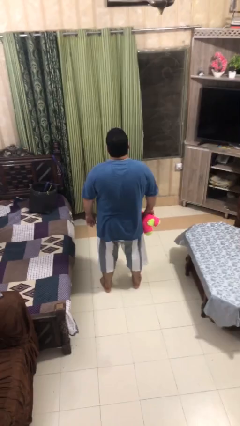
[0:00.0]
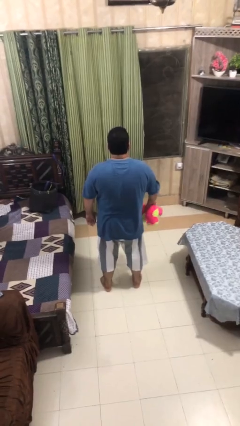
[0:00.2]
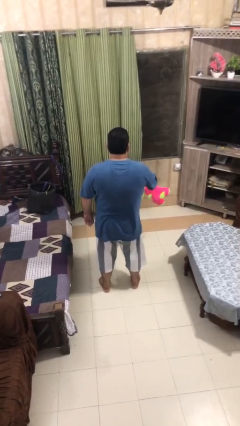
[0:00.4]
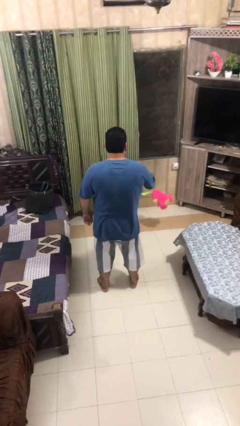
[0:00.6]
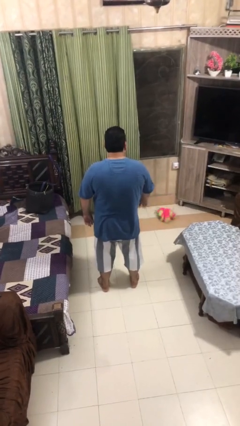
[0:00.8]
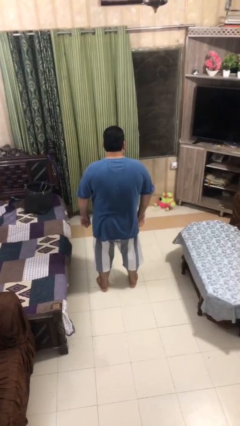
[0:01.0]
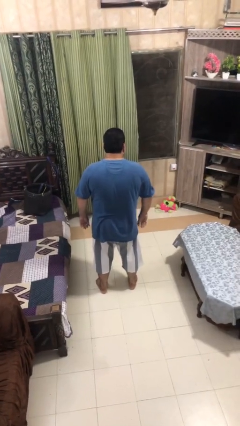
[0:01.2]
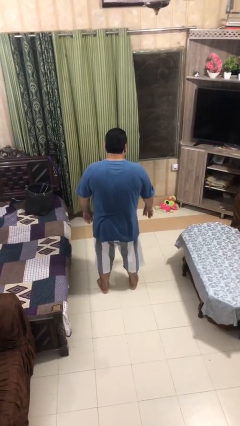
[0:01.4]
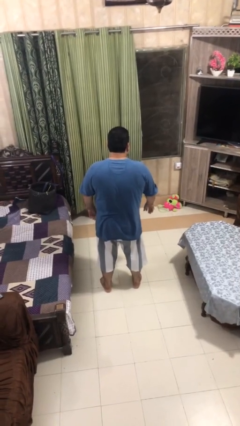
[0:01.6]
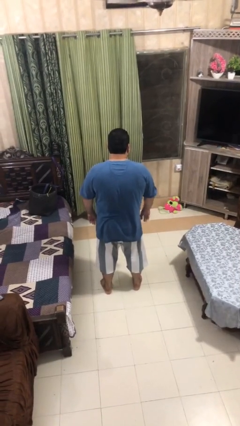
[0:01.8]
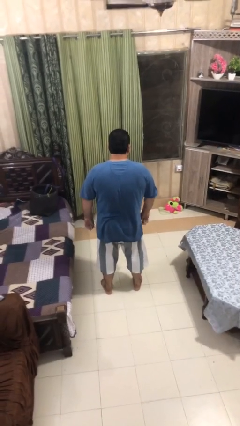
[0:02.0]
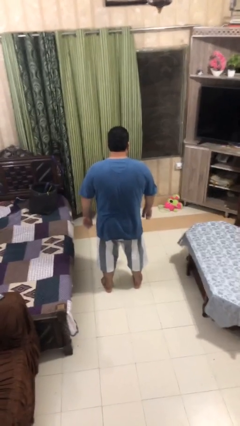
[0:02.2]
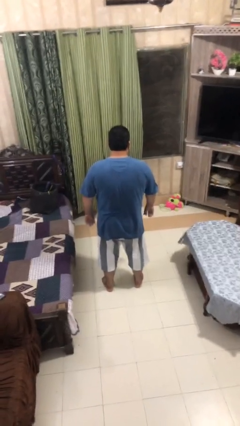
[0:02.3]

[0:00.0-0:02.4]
person throws object to ground

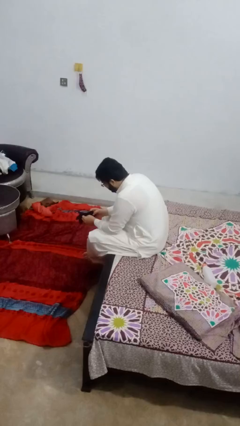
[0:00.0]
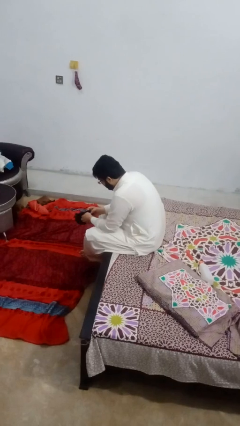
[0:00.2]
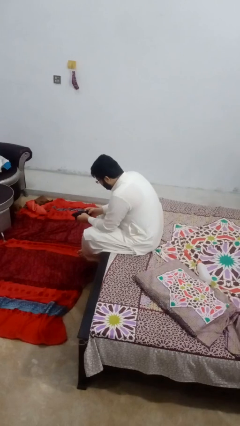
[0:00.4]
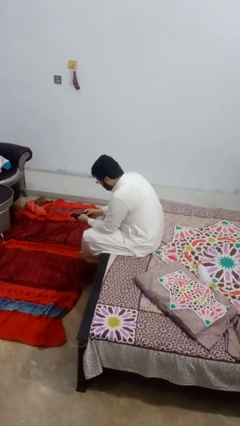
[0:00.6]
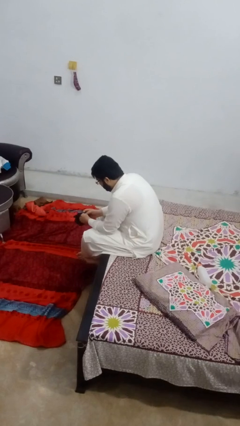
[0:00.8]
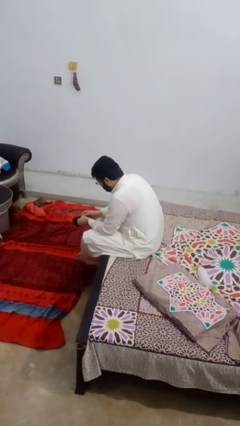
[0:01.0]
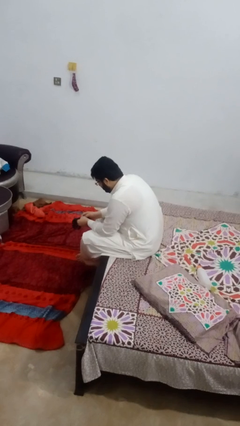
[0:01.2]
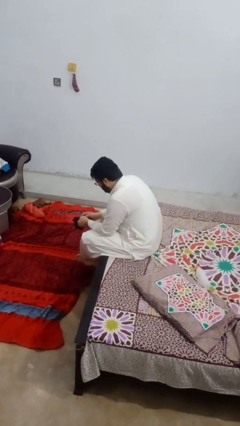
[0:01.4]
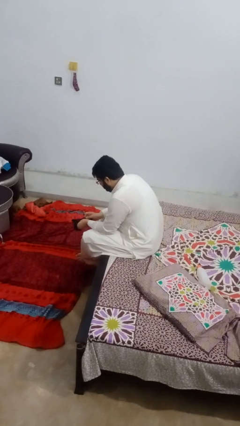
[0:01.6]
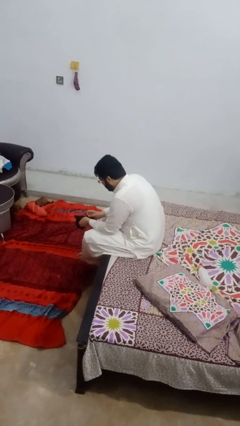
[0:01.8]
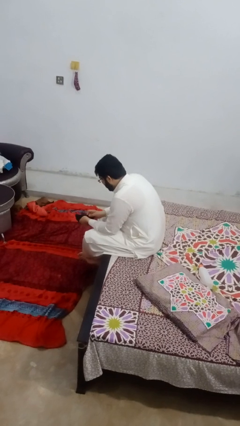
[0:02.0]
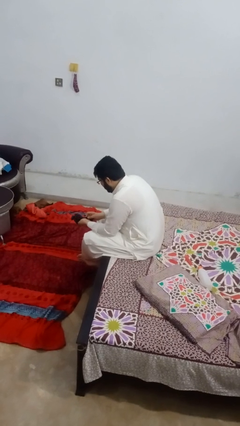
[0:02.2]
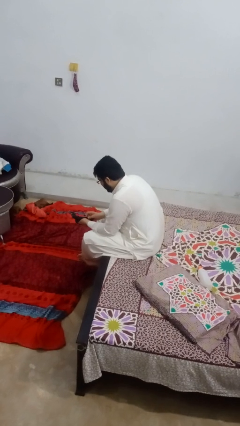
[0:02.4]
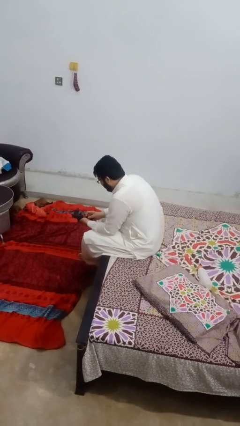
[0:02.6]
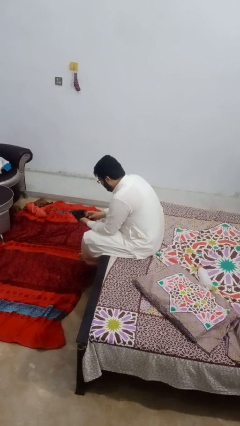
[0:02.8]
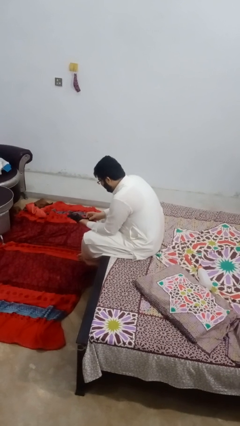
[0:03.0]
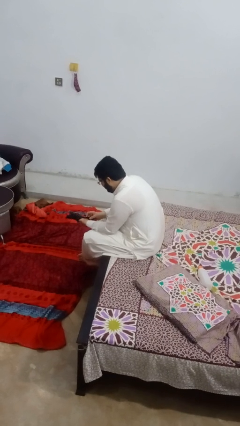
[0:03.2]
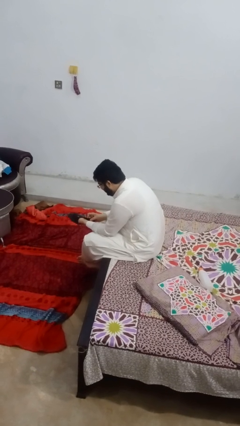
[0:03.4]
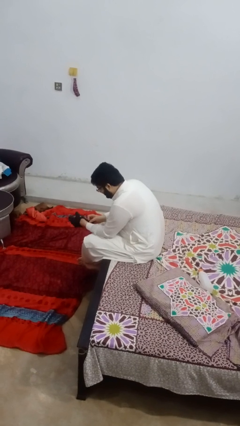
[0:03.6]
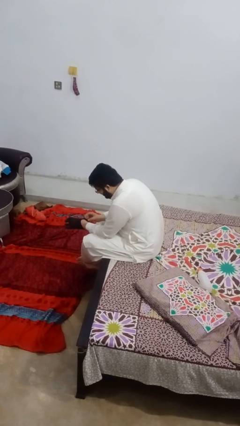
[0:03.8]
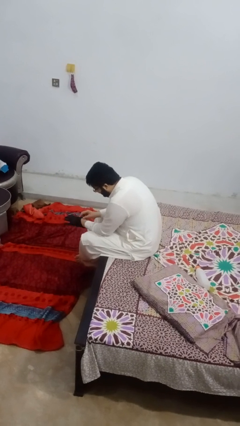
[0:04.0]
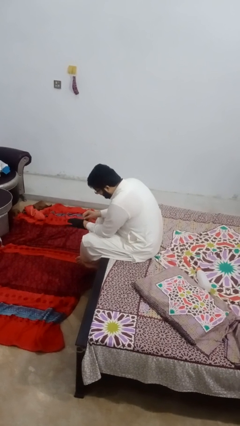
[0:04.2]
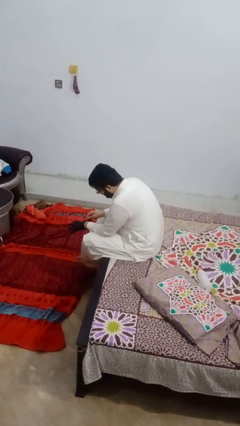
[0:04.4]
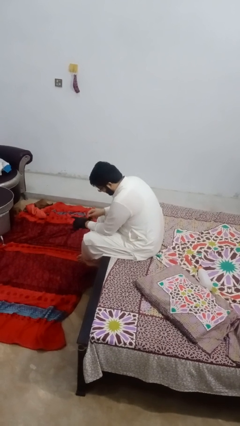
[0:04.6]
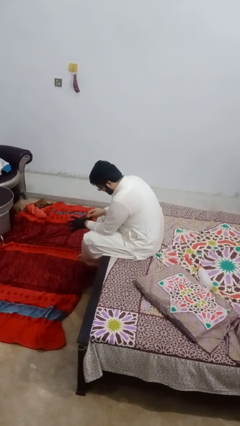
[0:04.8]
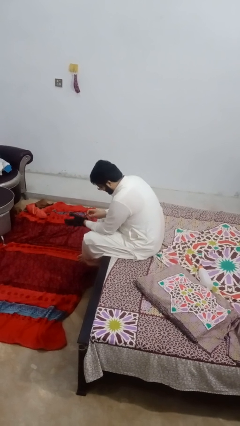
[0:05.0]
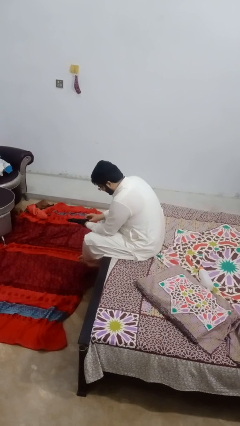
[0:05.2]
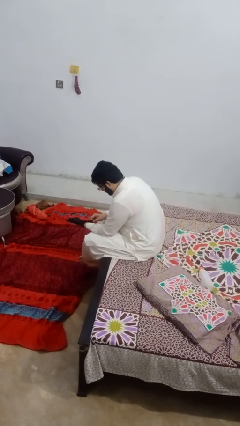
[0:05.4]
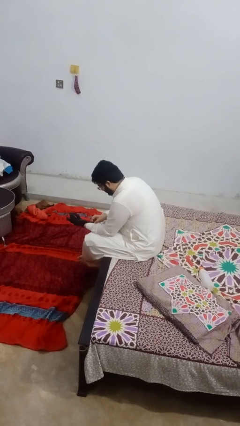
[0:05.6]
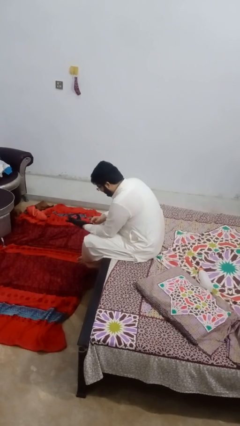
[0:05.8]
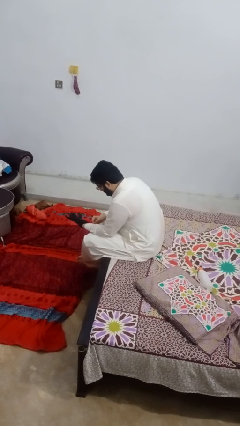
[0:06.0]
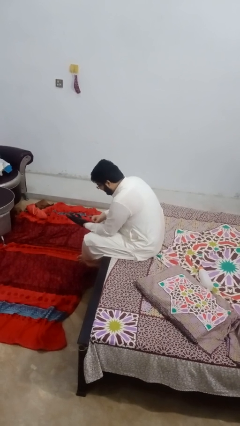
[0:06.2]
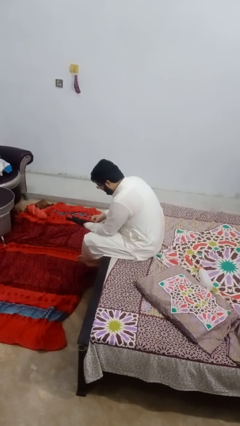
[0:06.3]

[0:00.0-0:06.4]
person puts on gloves

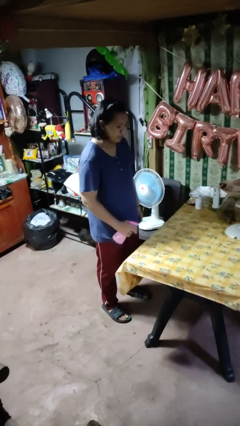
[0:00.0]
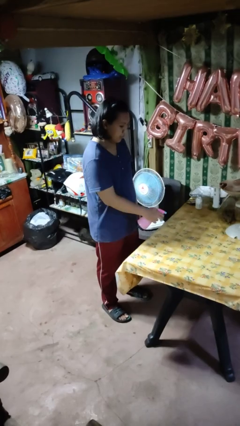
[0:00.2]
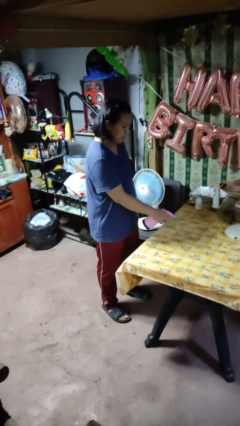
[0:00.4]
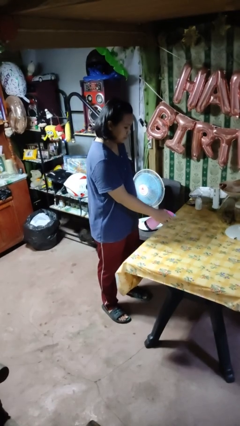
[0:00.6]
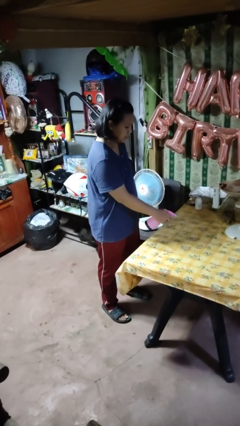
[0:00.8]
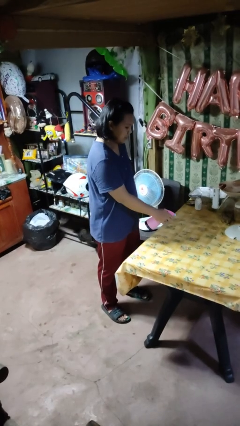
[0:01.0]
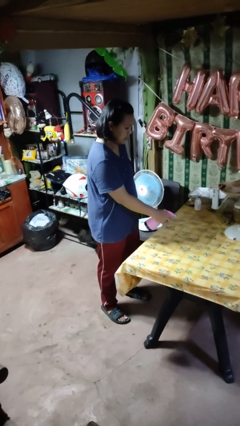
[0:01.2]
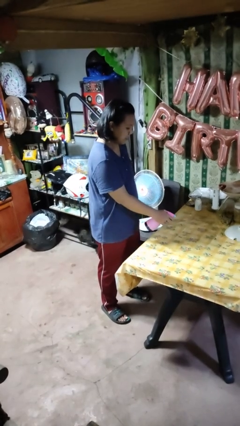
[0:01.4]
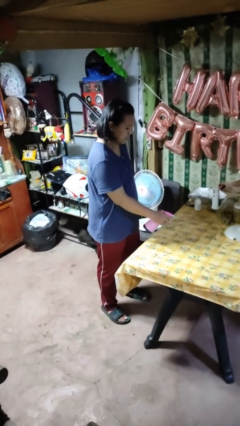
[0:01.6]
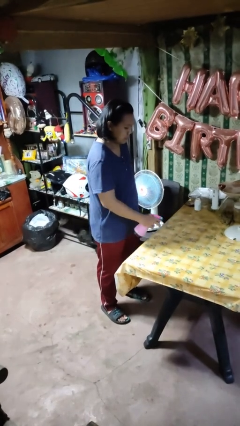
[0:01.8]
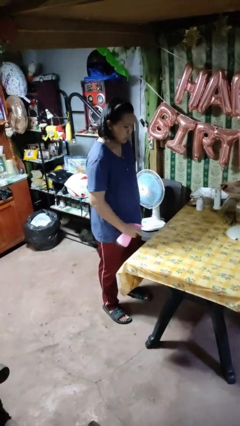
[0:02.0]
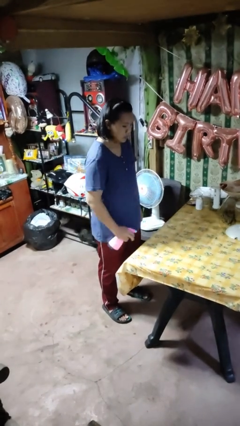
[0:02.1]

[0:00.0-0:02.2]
person sprays from bottle

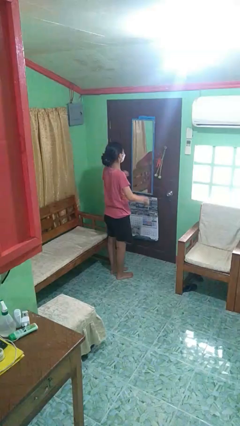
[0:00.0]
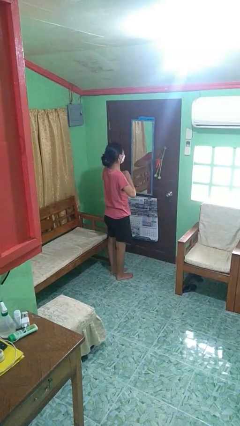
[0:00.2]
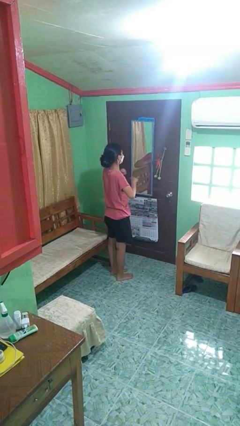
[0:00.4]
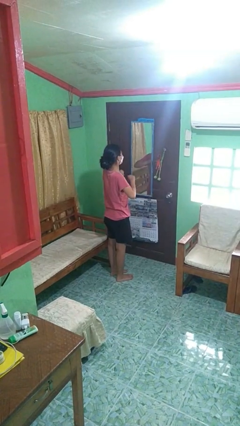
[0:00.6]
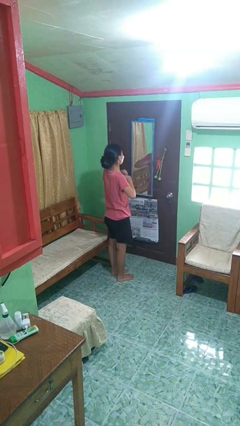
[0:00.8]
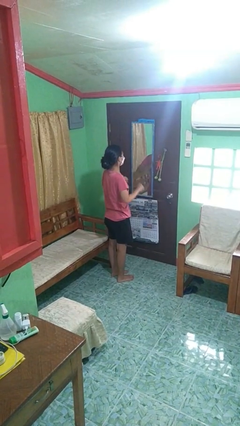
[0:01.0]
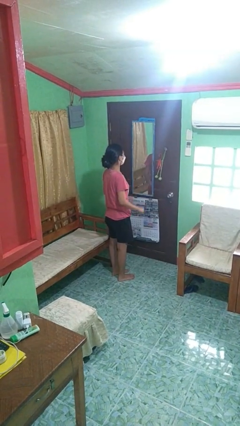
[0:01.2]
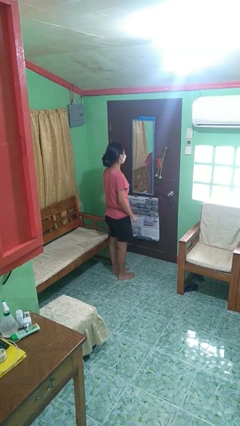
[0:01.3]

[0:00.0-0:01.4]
person drums on chest

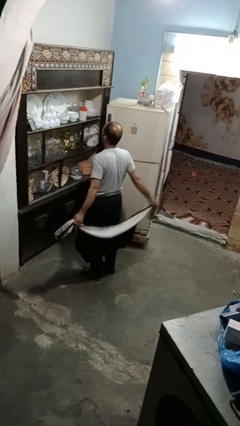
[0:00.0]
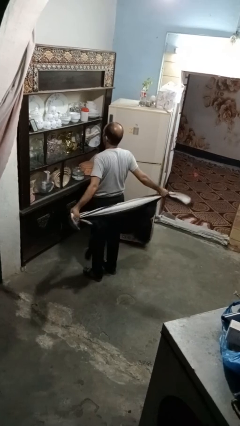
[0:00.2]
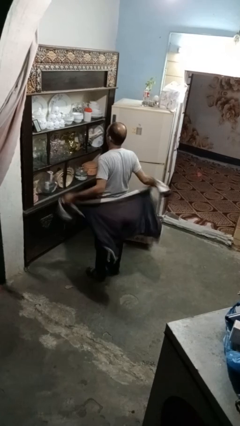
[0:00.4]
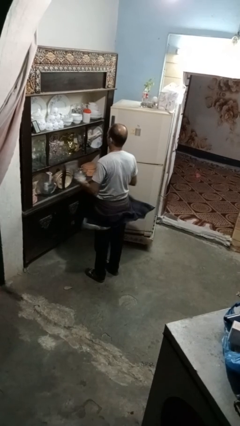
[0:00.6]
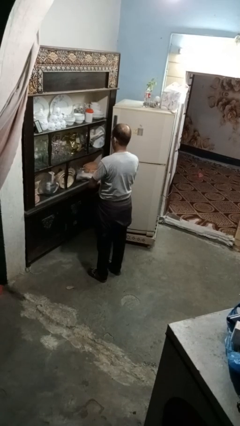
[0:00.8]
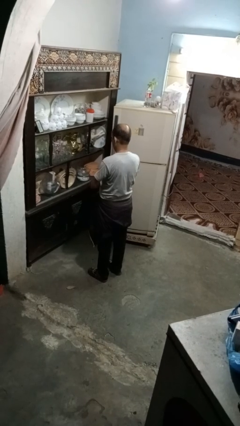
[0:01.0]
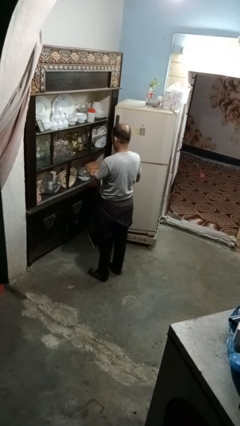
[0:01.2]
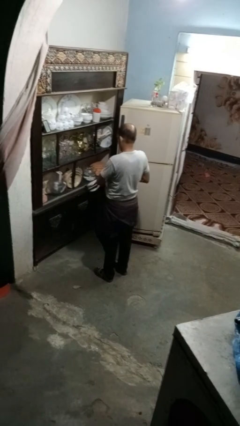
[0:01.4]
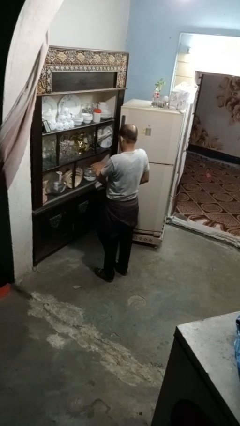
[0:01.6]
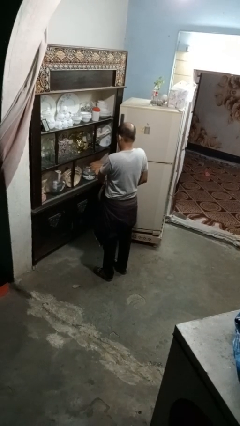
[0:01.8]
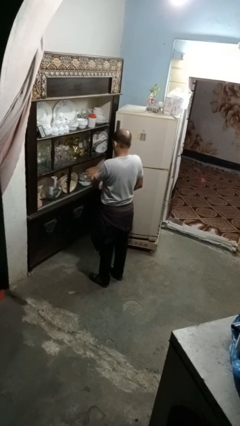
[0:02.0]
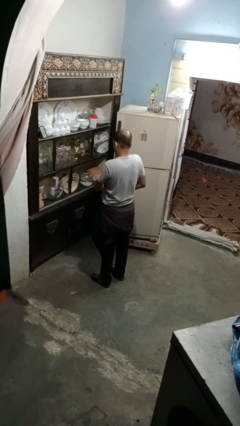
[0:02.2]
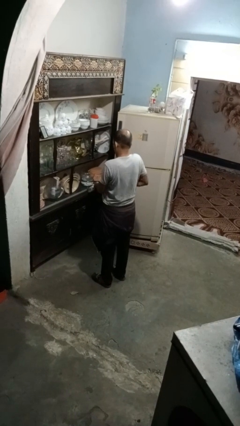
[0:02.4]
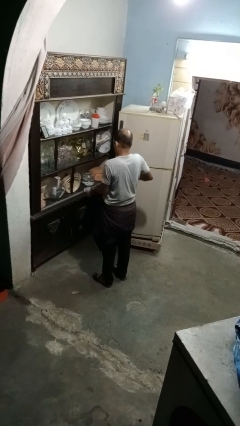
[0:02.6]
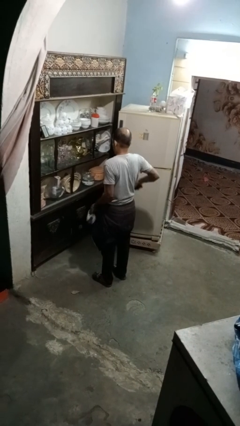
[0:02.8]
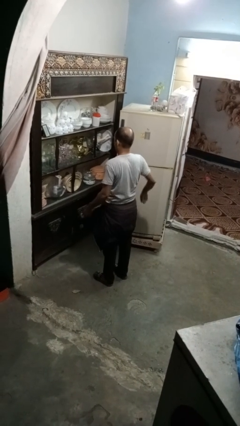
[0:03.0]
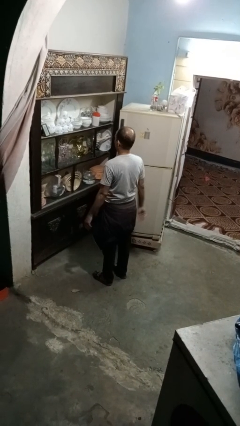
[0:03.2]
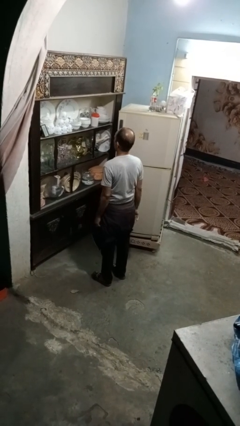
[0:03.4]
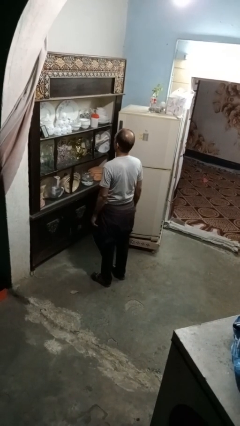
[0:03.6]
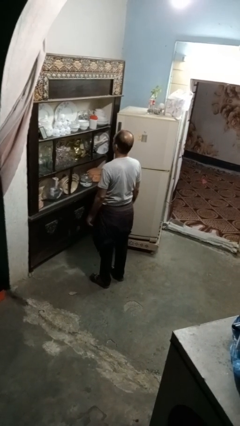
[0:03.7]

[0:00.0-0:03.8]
person ties jacket around waist

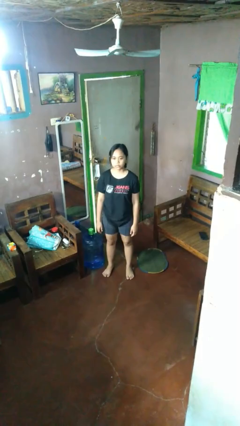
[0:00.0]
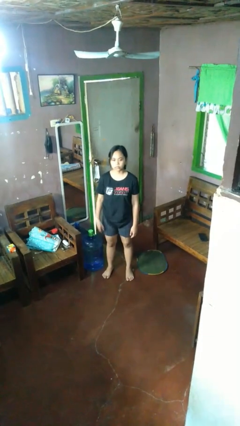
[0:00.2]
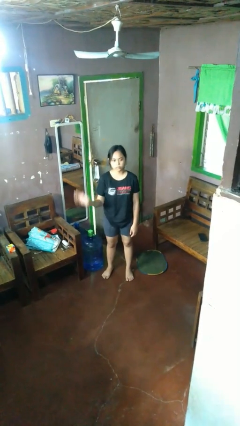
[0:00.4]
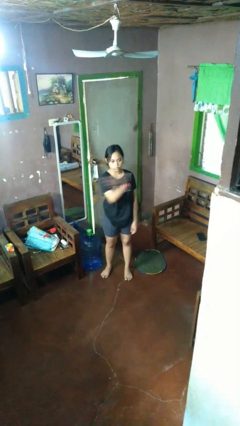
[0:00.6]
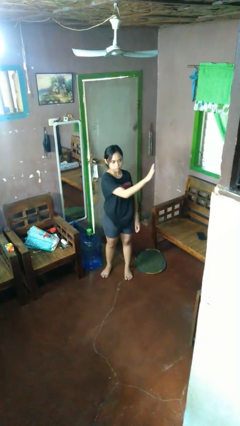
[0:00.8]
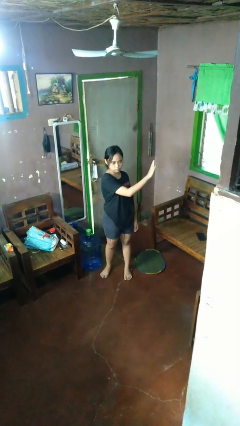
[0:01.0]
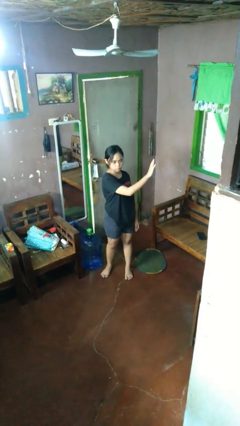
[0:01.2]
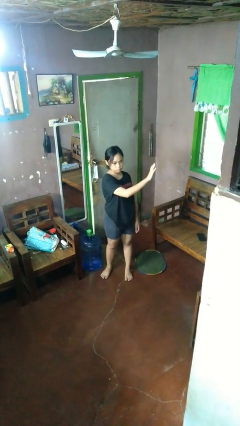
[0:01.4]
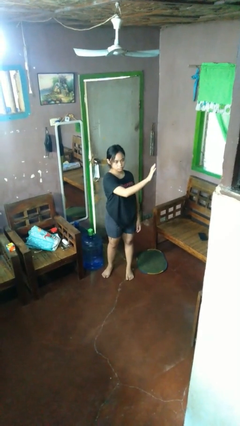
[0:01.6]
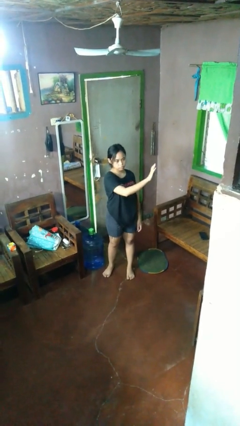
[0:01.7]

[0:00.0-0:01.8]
person gestures swipe left
